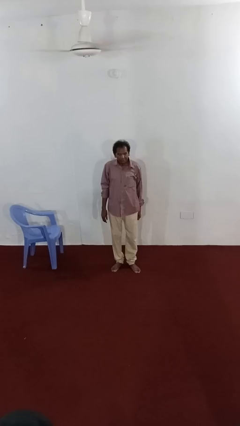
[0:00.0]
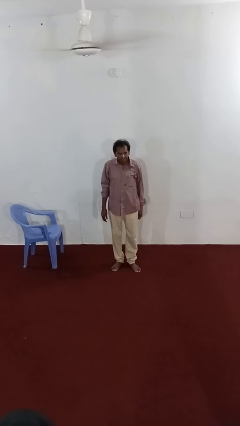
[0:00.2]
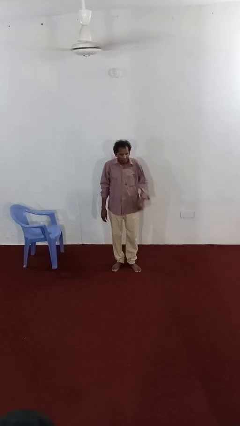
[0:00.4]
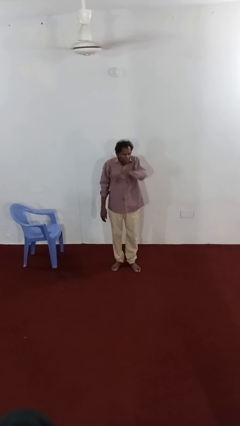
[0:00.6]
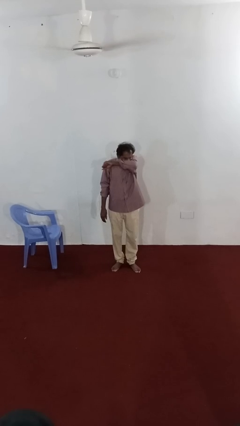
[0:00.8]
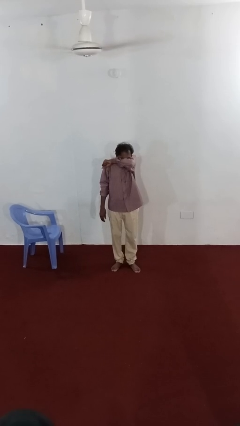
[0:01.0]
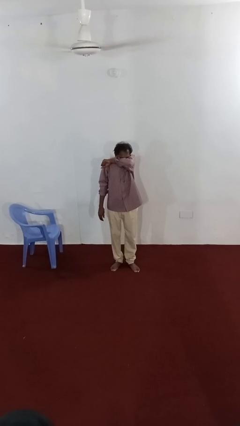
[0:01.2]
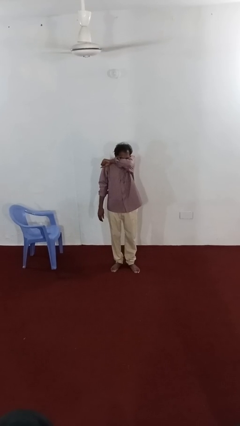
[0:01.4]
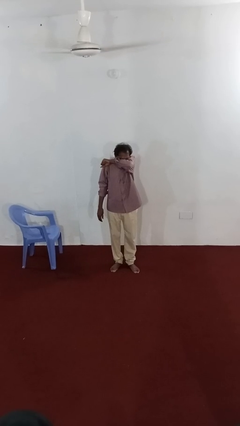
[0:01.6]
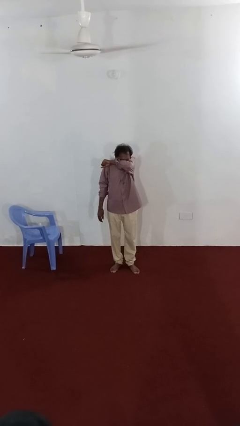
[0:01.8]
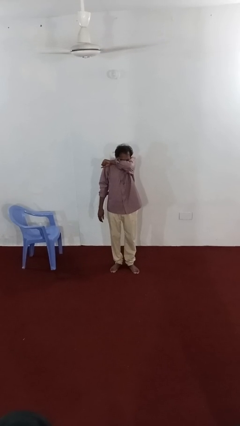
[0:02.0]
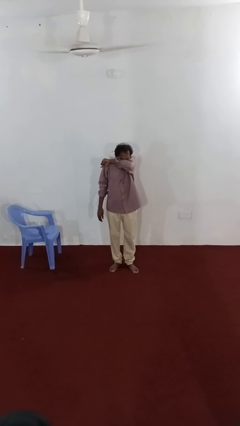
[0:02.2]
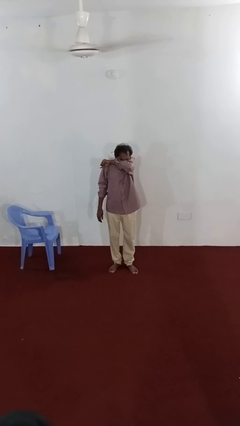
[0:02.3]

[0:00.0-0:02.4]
person sneezes into arm

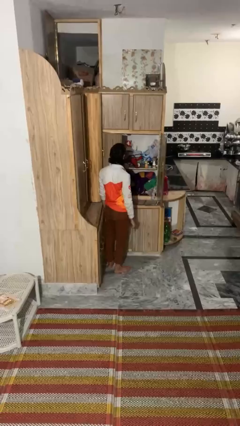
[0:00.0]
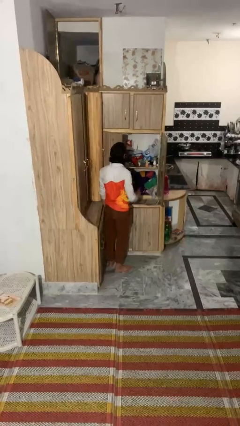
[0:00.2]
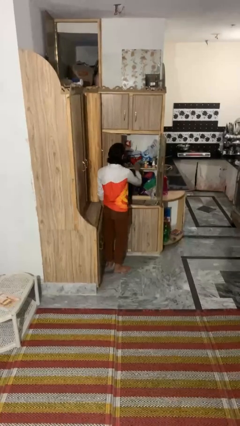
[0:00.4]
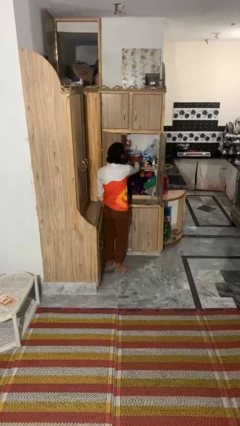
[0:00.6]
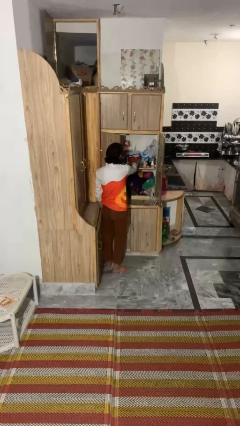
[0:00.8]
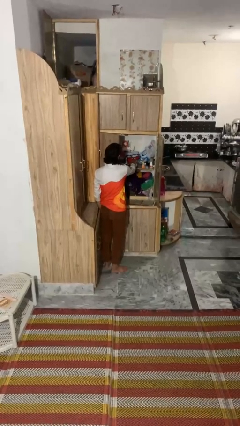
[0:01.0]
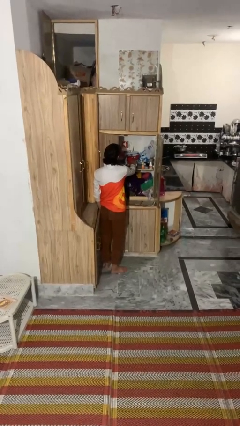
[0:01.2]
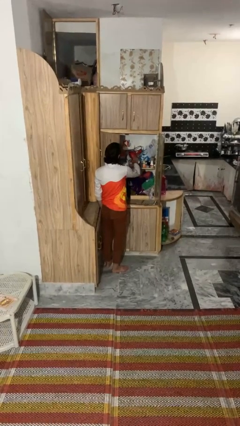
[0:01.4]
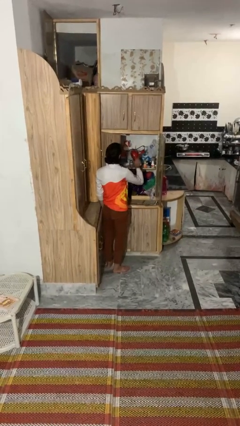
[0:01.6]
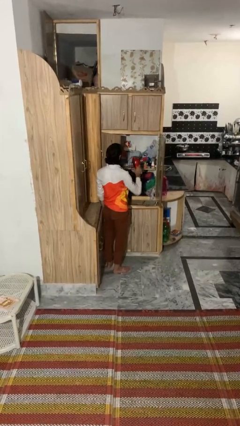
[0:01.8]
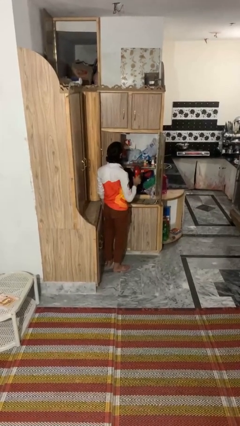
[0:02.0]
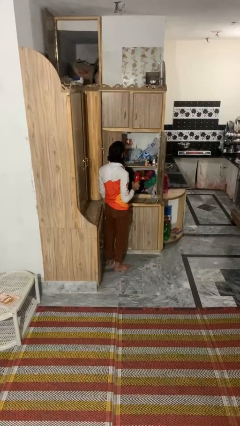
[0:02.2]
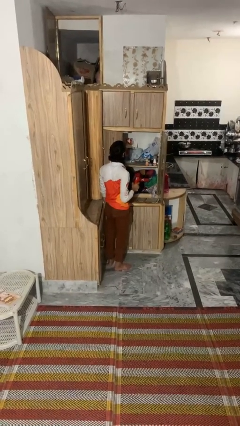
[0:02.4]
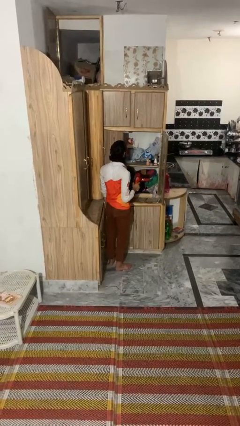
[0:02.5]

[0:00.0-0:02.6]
person picks up object from cabinet

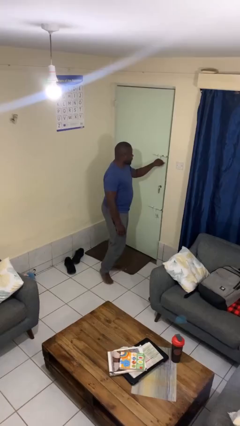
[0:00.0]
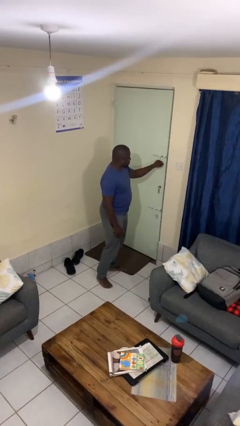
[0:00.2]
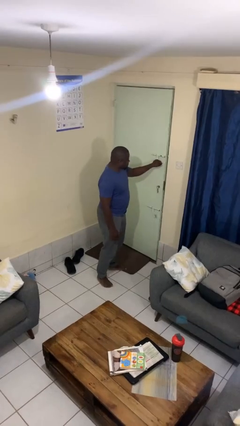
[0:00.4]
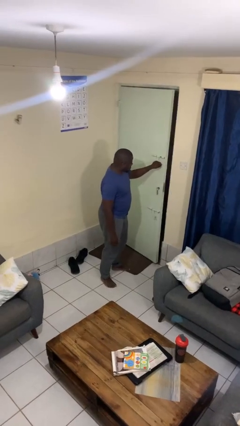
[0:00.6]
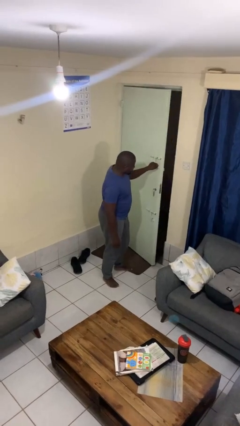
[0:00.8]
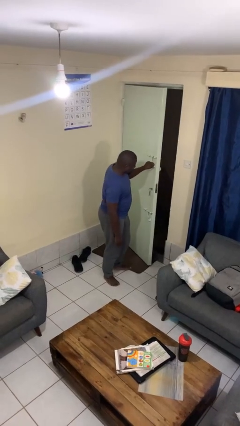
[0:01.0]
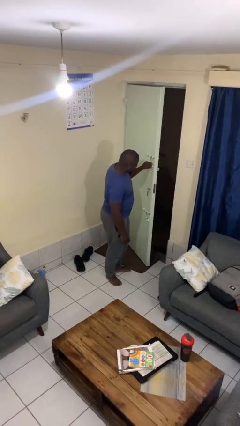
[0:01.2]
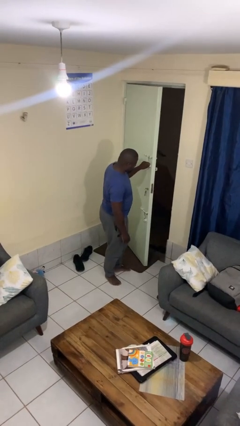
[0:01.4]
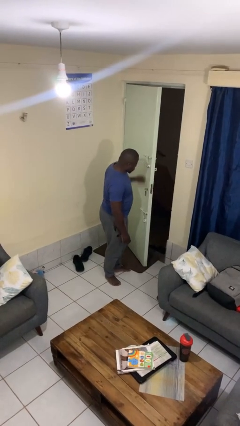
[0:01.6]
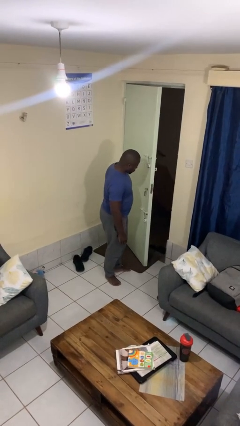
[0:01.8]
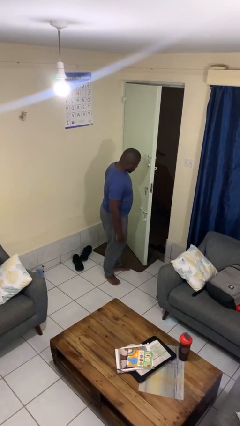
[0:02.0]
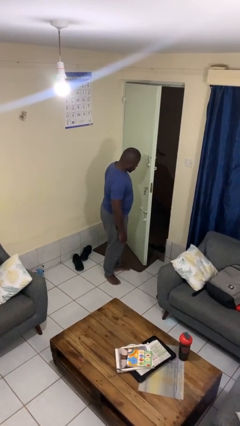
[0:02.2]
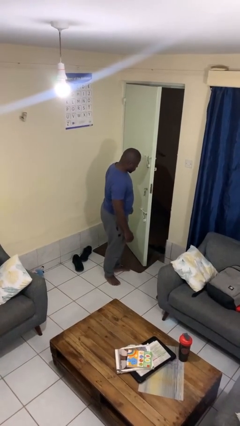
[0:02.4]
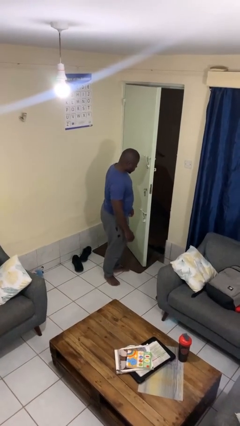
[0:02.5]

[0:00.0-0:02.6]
person opens facility door

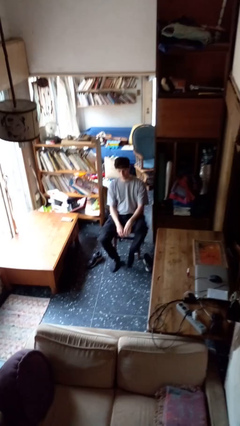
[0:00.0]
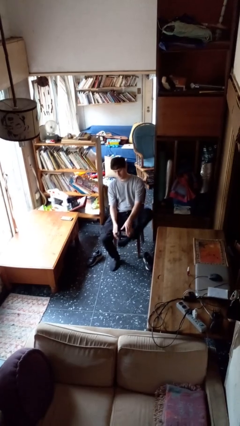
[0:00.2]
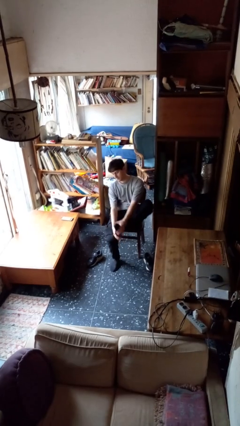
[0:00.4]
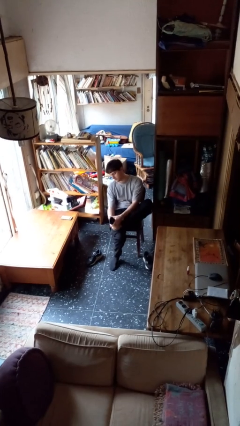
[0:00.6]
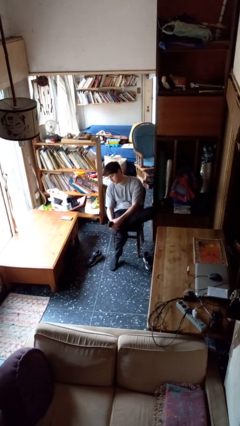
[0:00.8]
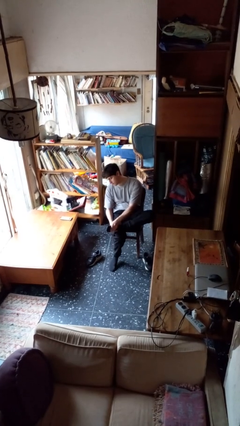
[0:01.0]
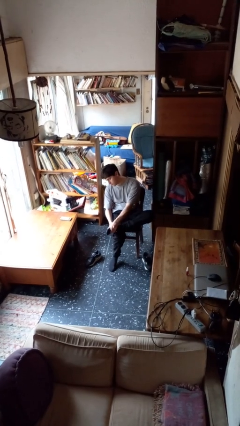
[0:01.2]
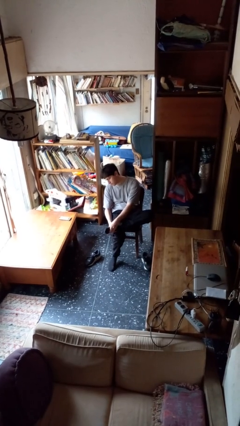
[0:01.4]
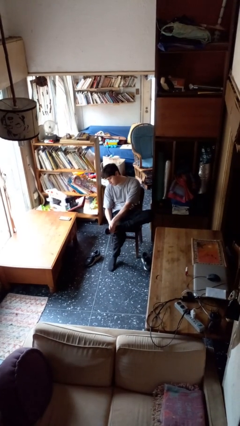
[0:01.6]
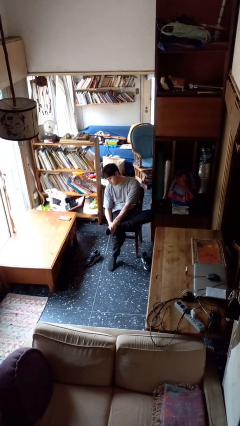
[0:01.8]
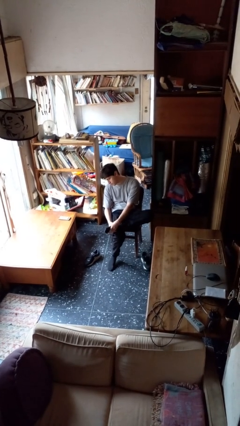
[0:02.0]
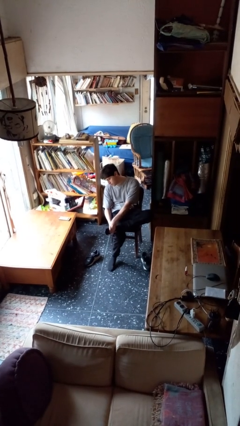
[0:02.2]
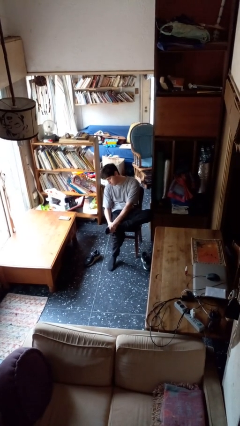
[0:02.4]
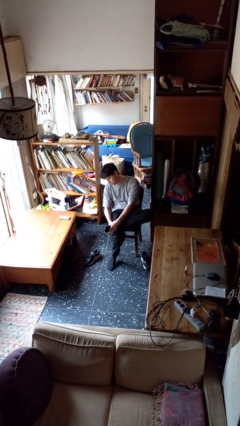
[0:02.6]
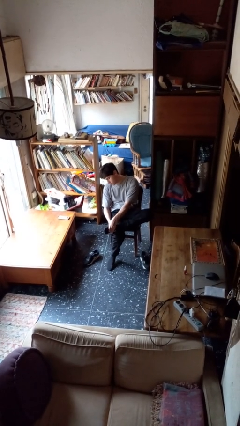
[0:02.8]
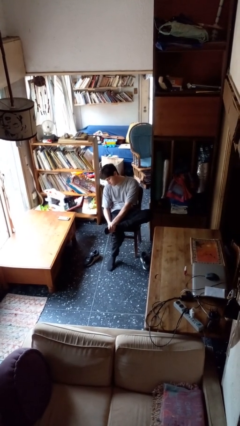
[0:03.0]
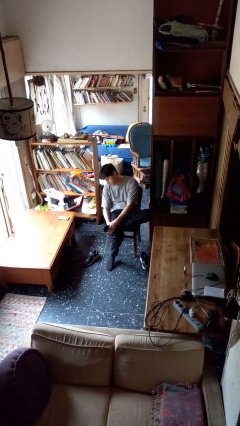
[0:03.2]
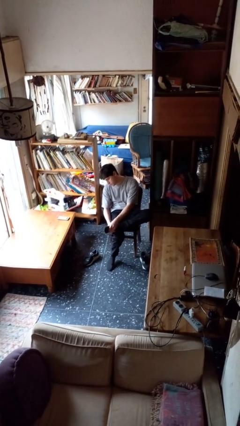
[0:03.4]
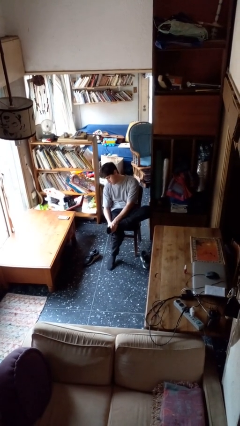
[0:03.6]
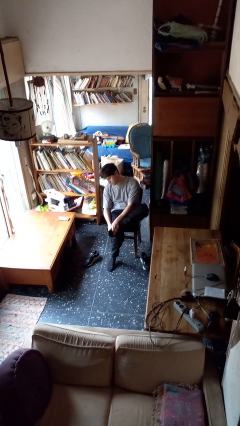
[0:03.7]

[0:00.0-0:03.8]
person rubs foot

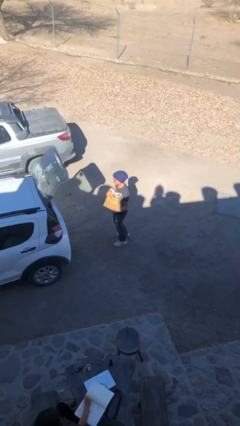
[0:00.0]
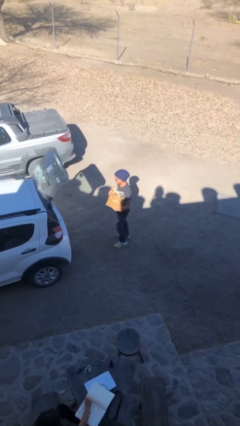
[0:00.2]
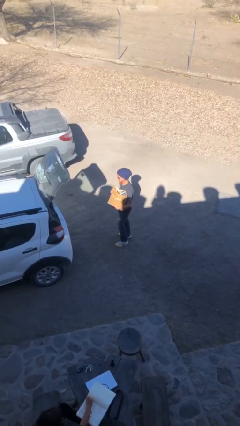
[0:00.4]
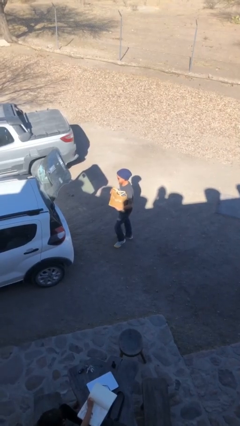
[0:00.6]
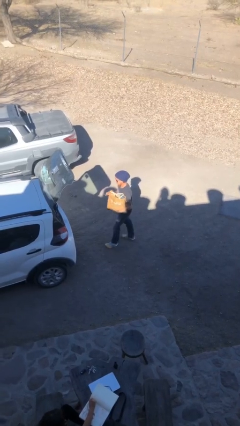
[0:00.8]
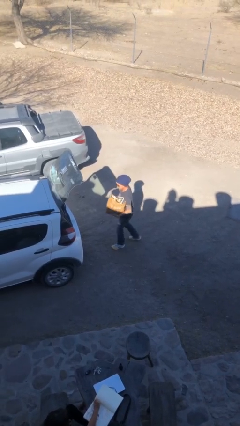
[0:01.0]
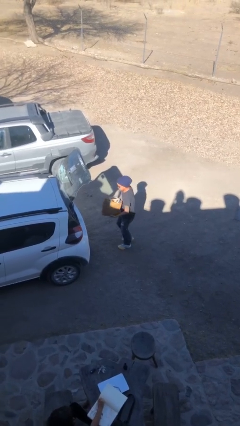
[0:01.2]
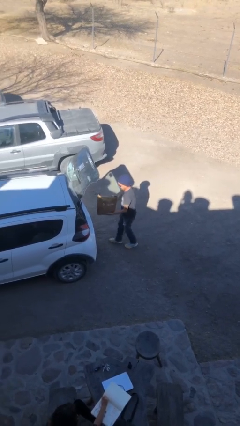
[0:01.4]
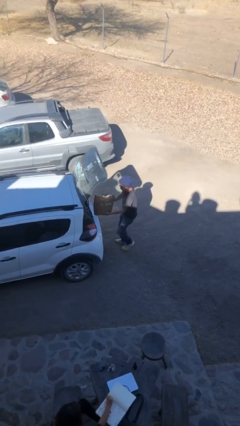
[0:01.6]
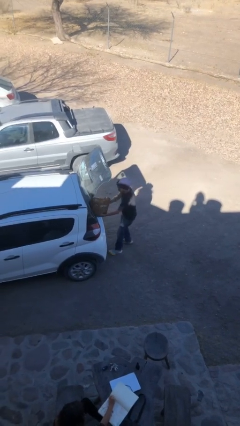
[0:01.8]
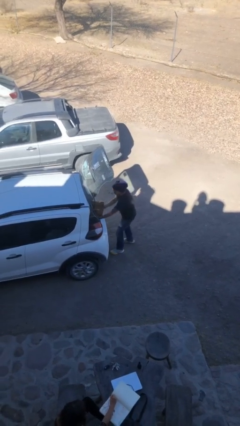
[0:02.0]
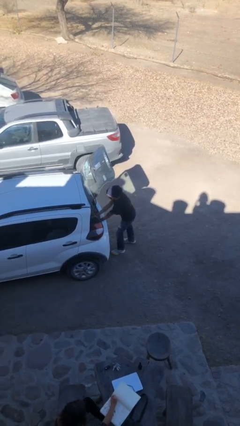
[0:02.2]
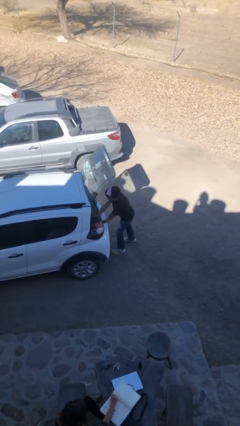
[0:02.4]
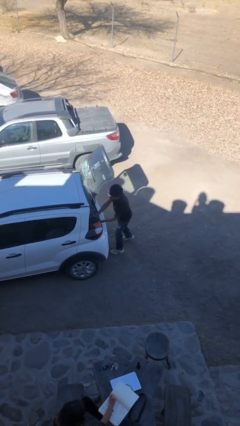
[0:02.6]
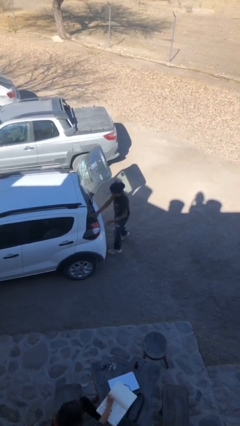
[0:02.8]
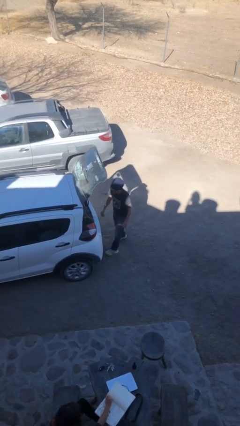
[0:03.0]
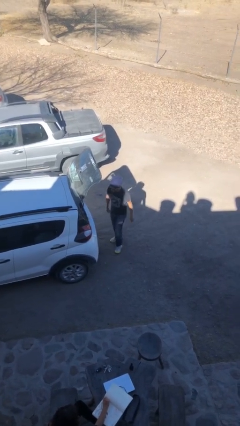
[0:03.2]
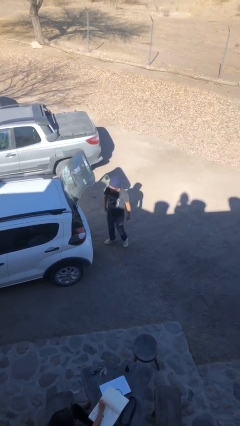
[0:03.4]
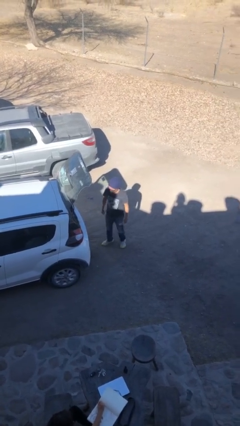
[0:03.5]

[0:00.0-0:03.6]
person loads car

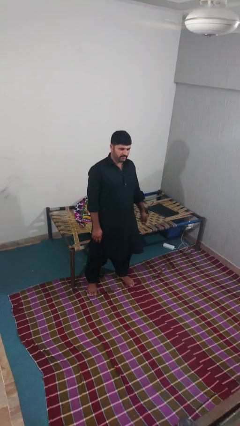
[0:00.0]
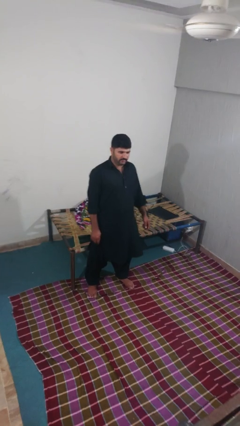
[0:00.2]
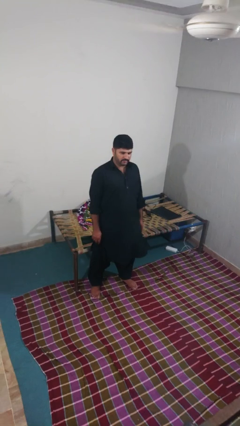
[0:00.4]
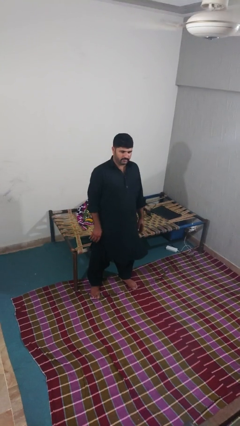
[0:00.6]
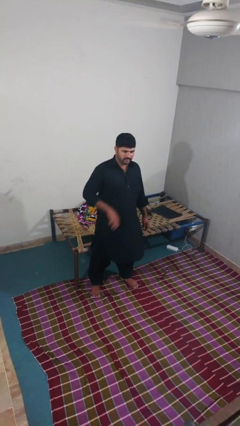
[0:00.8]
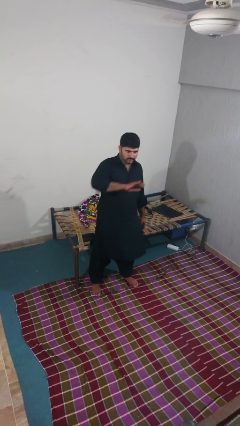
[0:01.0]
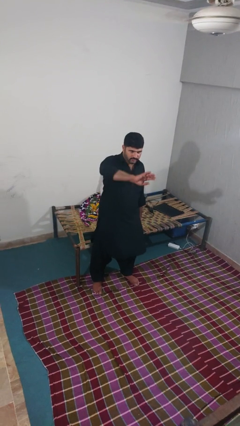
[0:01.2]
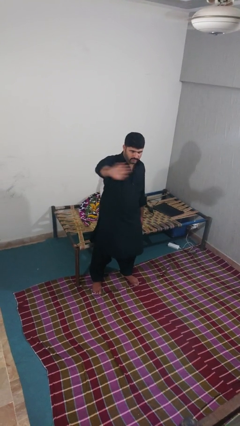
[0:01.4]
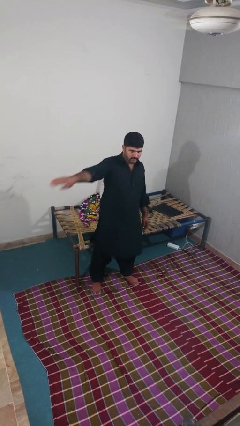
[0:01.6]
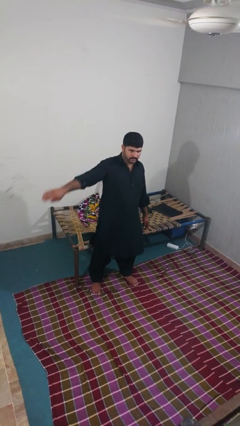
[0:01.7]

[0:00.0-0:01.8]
person gestures swipe right
